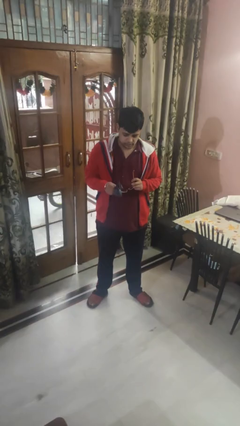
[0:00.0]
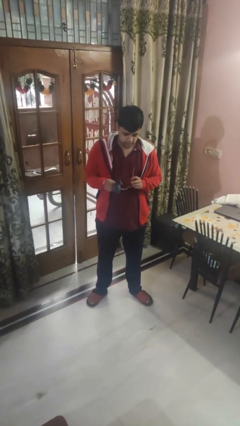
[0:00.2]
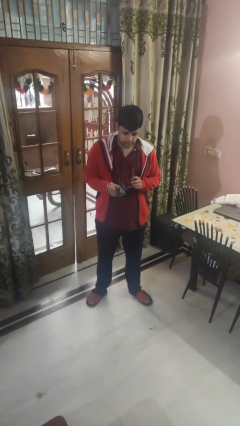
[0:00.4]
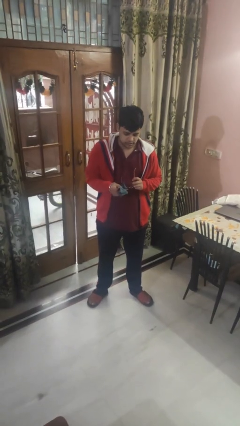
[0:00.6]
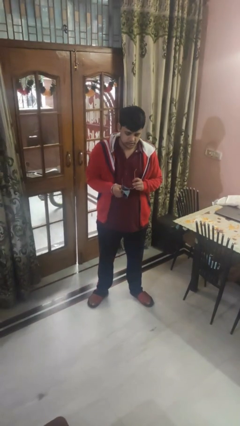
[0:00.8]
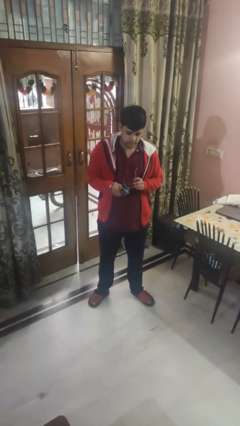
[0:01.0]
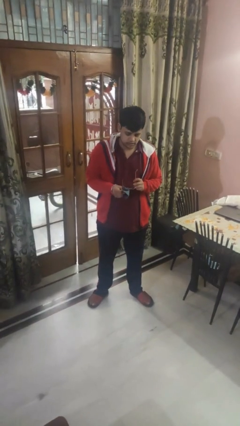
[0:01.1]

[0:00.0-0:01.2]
person cleans eyeglasses

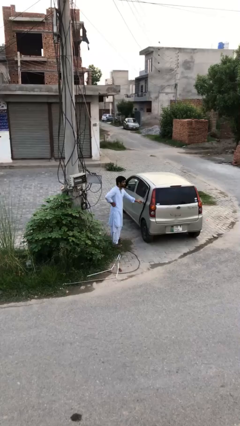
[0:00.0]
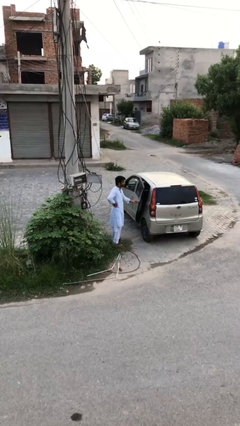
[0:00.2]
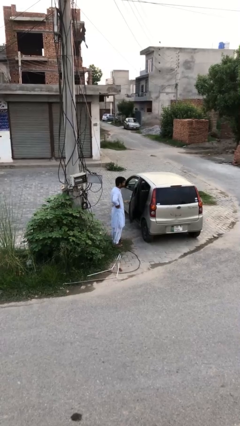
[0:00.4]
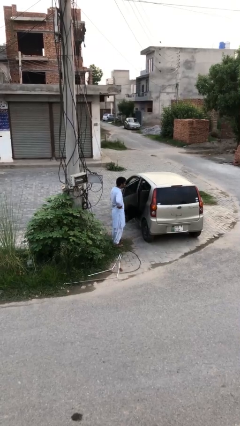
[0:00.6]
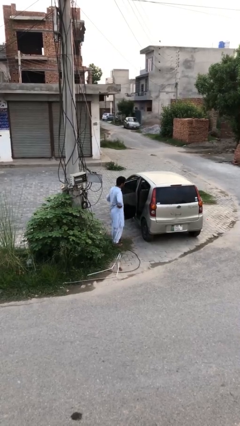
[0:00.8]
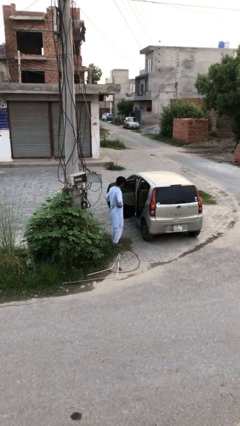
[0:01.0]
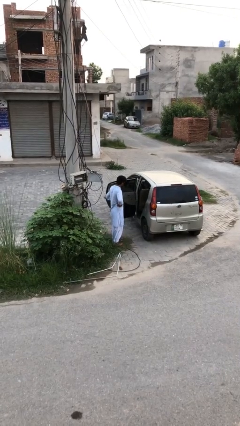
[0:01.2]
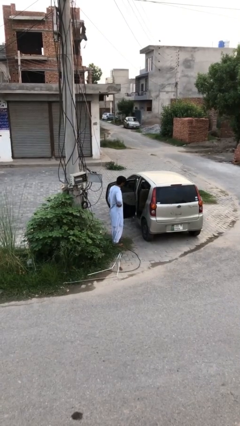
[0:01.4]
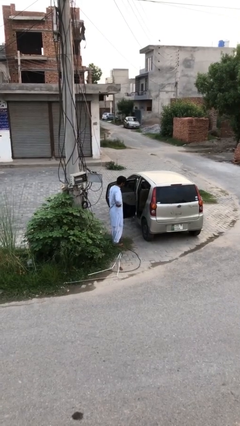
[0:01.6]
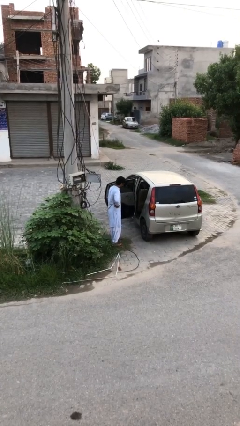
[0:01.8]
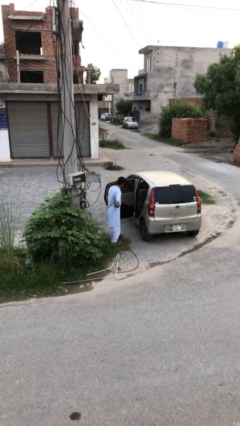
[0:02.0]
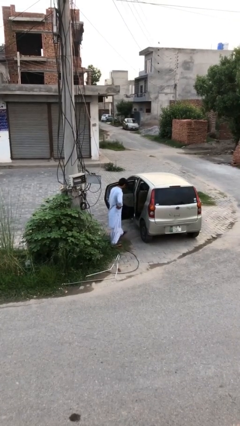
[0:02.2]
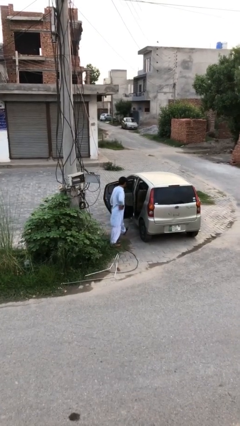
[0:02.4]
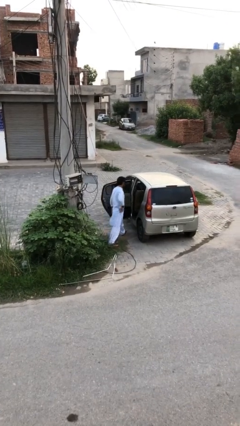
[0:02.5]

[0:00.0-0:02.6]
person opens car door

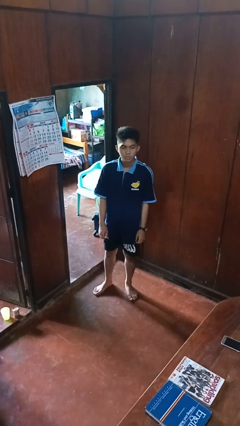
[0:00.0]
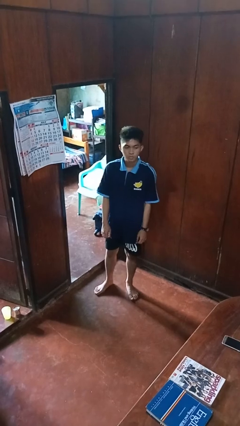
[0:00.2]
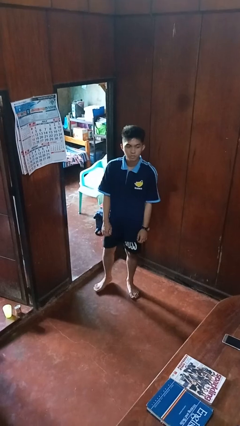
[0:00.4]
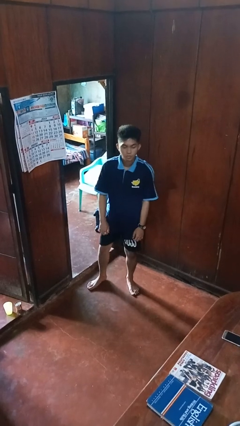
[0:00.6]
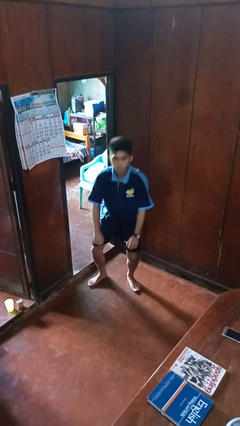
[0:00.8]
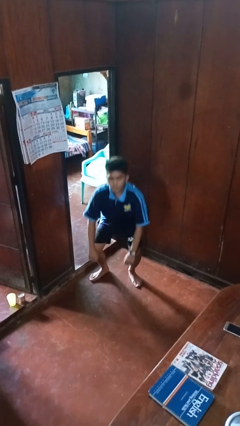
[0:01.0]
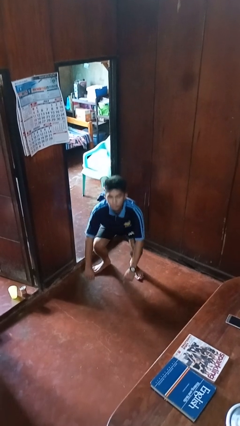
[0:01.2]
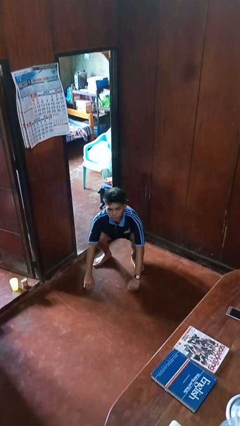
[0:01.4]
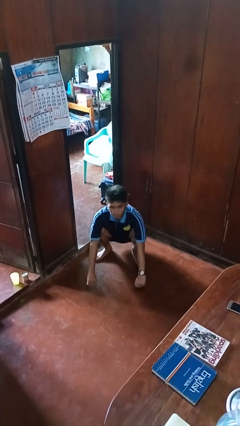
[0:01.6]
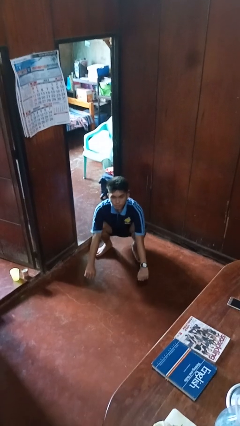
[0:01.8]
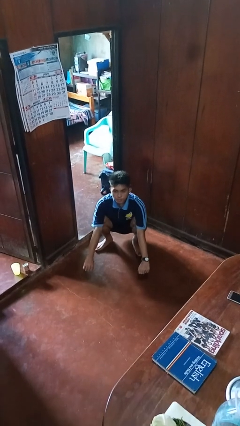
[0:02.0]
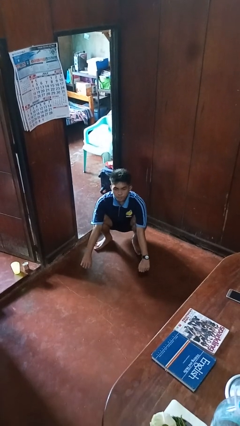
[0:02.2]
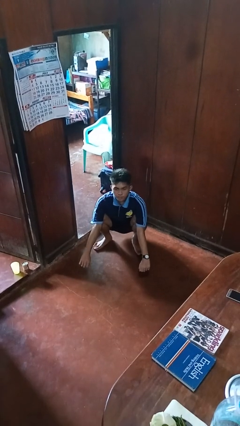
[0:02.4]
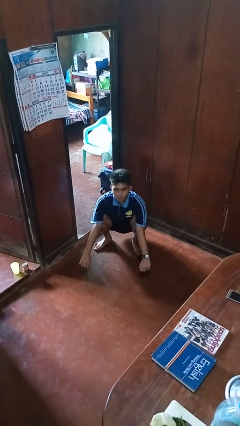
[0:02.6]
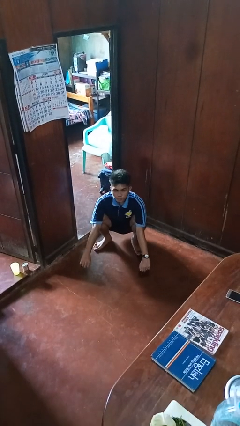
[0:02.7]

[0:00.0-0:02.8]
person squats

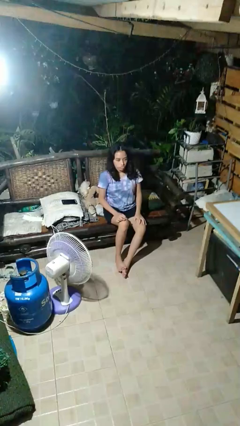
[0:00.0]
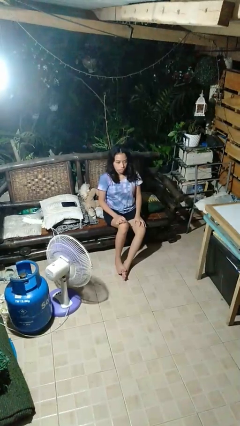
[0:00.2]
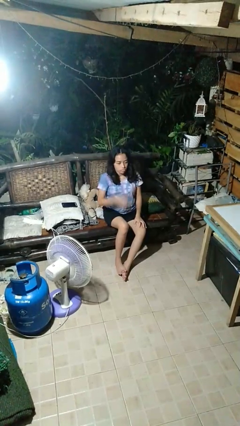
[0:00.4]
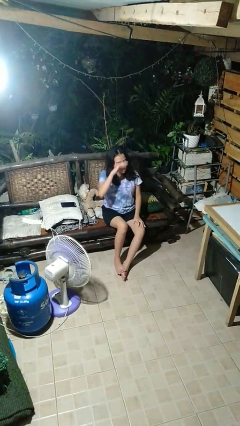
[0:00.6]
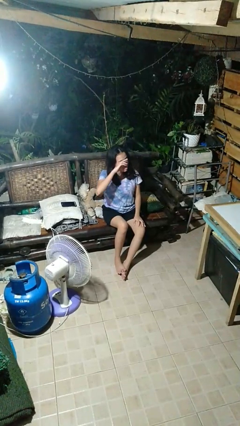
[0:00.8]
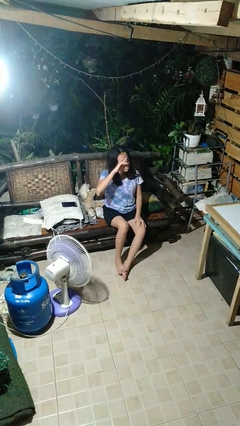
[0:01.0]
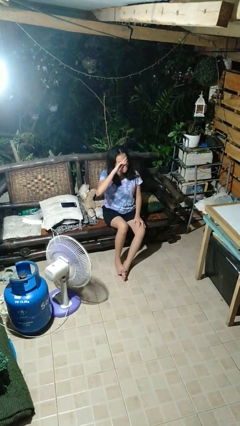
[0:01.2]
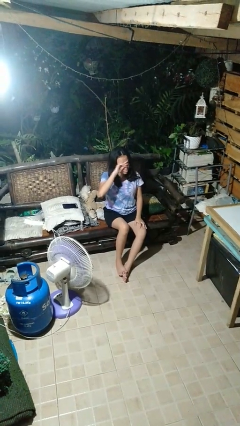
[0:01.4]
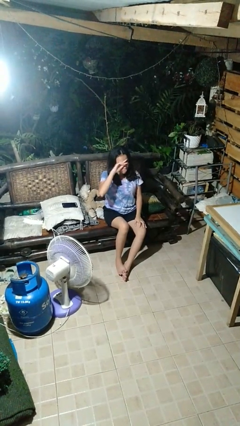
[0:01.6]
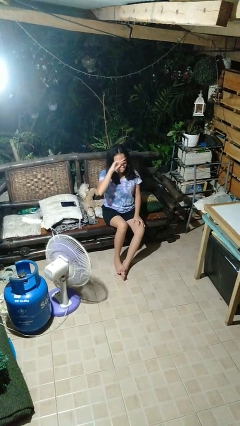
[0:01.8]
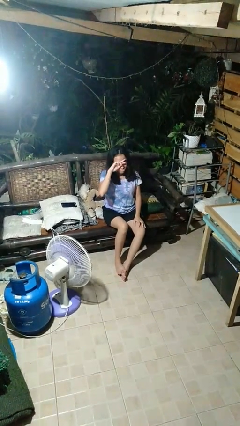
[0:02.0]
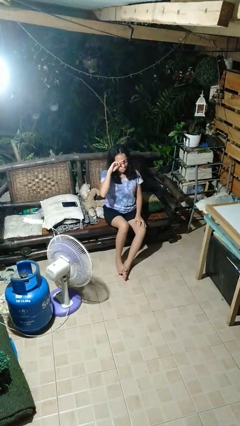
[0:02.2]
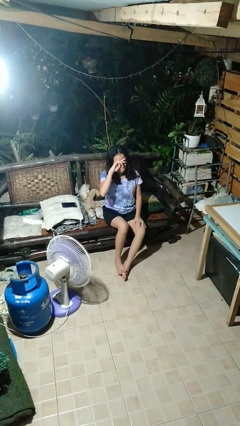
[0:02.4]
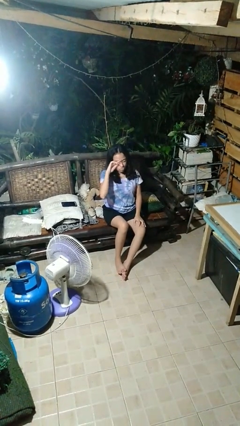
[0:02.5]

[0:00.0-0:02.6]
person rubs eyes

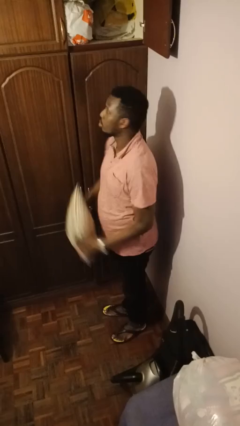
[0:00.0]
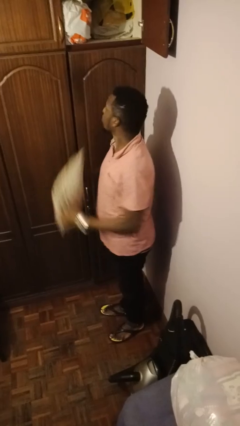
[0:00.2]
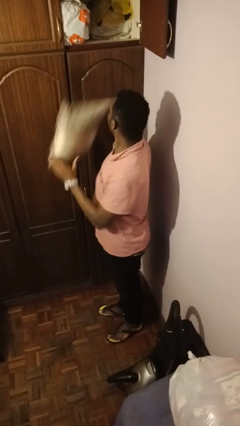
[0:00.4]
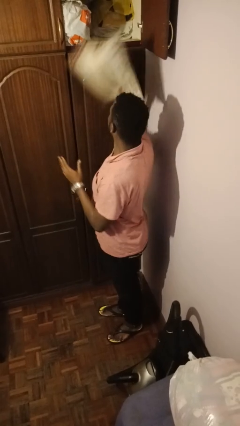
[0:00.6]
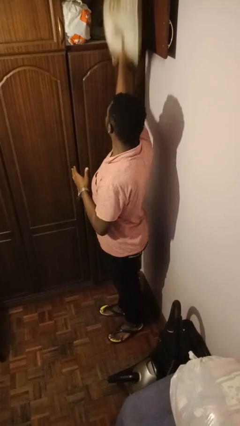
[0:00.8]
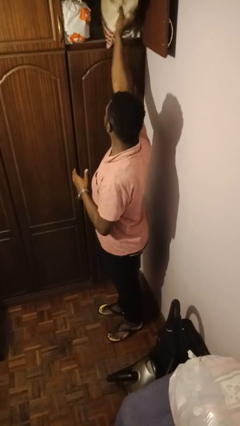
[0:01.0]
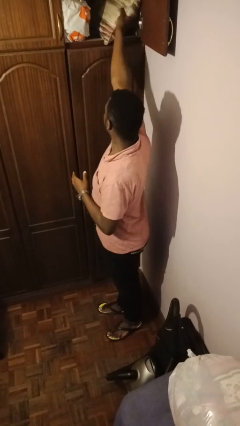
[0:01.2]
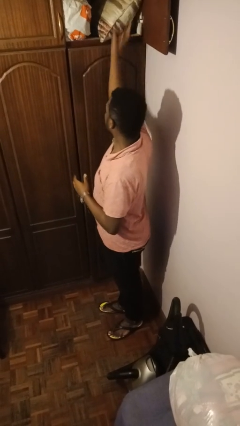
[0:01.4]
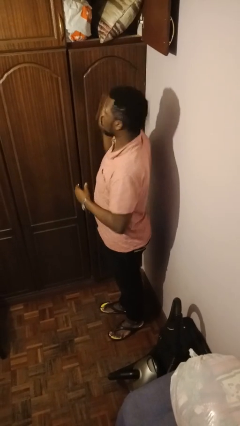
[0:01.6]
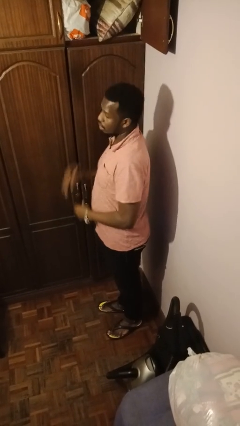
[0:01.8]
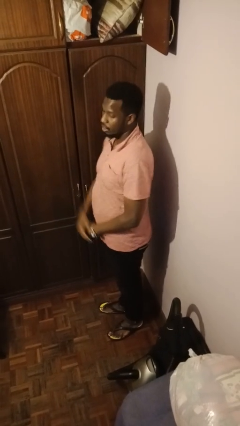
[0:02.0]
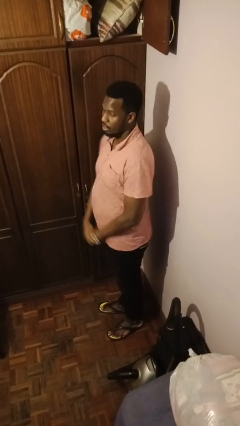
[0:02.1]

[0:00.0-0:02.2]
person puts down object on shelf

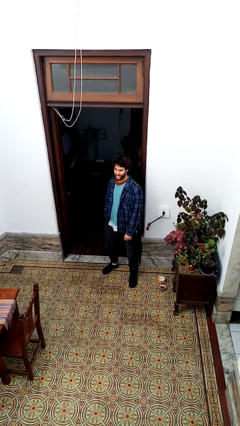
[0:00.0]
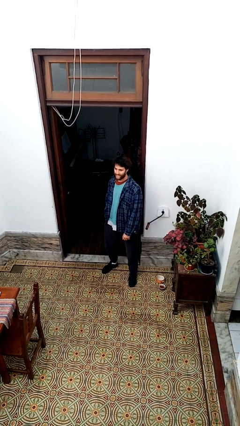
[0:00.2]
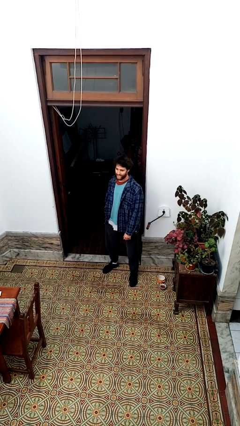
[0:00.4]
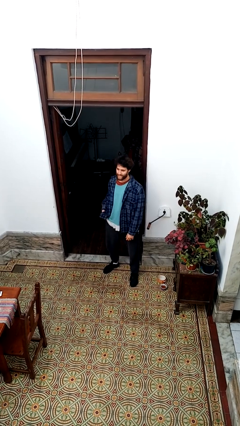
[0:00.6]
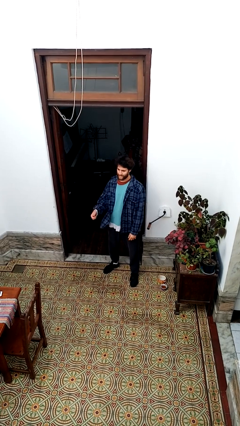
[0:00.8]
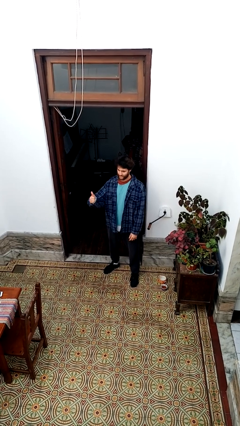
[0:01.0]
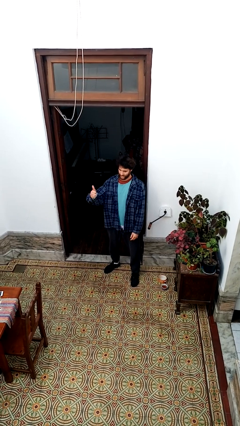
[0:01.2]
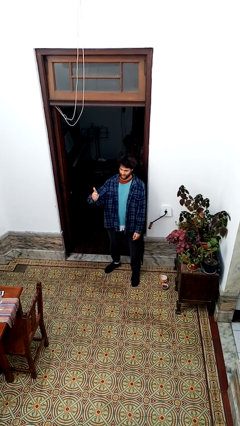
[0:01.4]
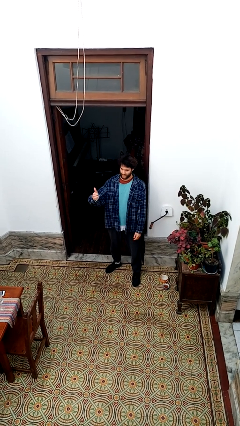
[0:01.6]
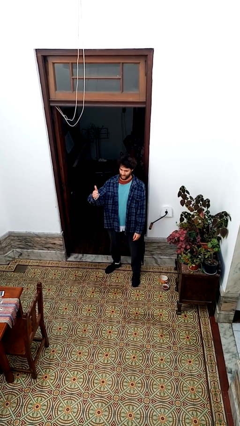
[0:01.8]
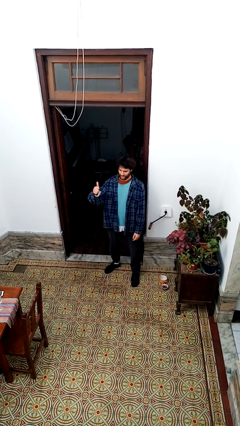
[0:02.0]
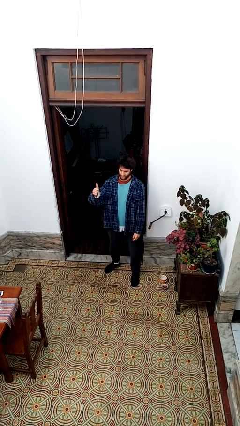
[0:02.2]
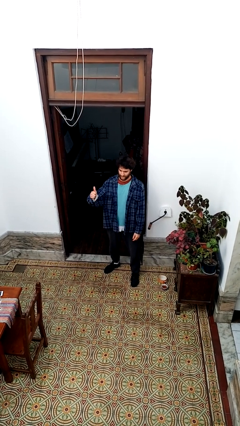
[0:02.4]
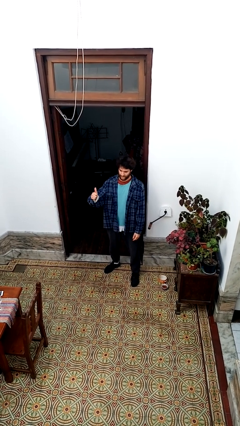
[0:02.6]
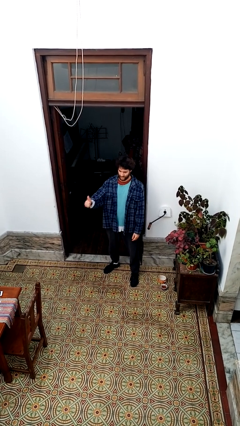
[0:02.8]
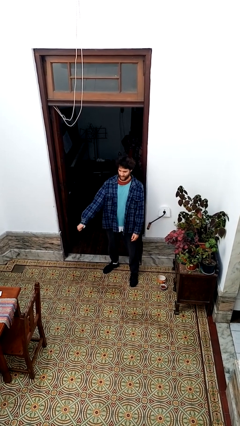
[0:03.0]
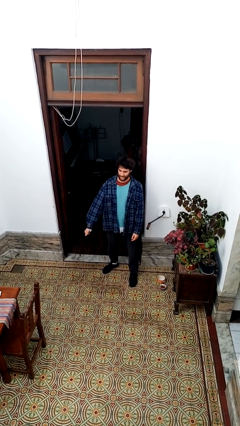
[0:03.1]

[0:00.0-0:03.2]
person gestures thumbs up

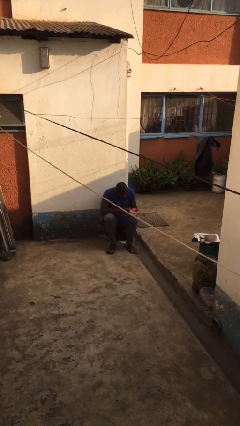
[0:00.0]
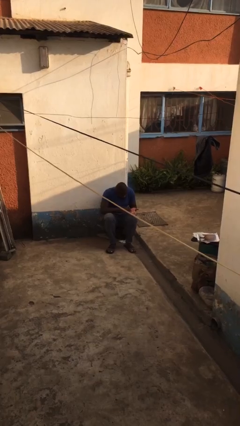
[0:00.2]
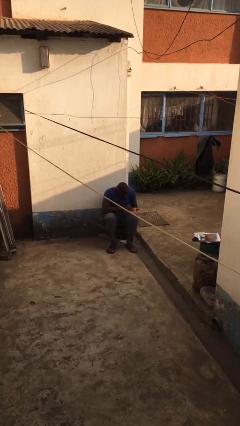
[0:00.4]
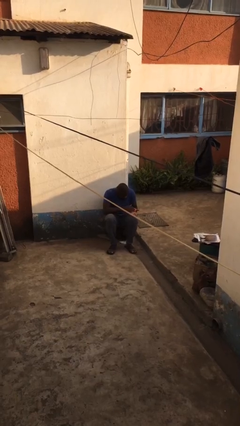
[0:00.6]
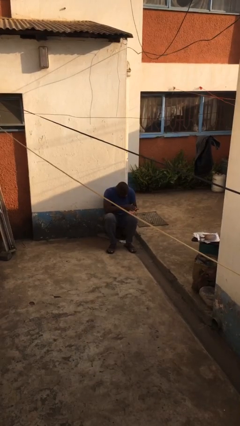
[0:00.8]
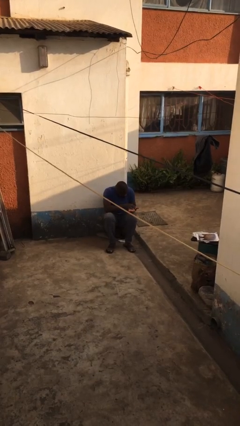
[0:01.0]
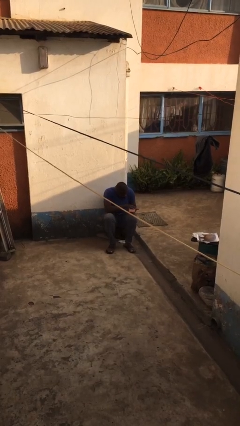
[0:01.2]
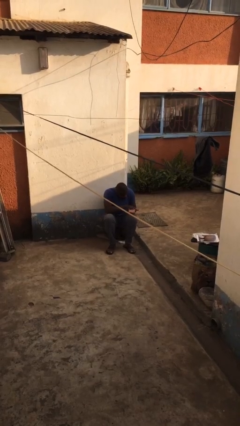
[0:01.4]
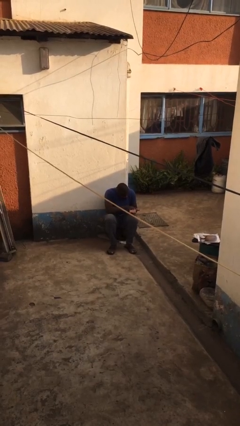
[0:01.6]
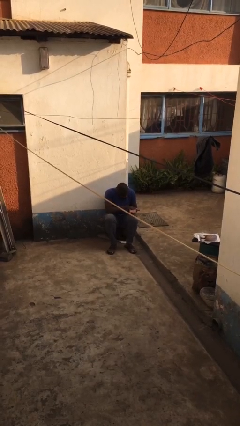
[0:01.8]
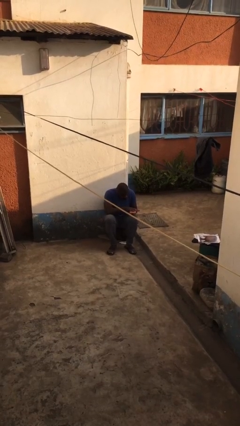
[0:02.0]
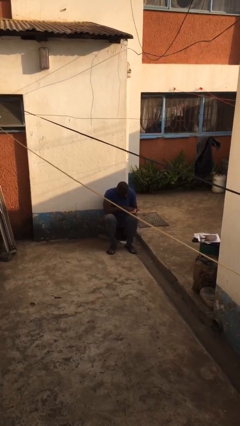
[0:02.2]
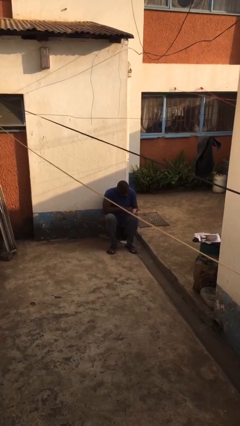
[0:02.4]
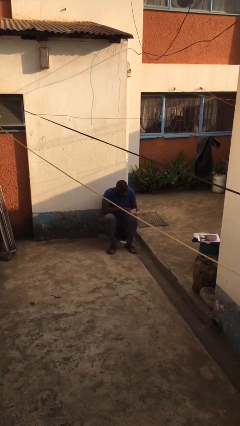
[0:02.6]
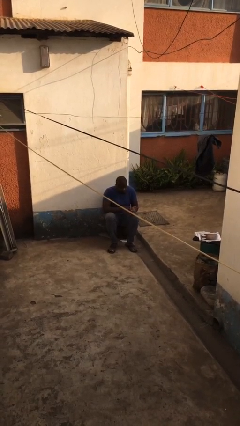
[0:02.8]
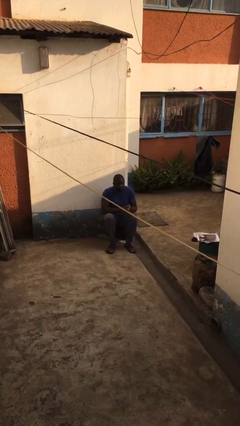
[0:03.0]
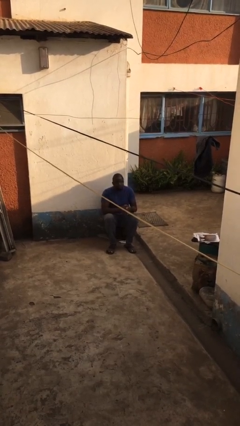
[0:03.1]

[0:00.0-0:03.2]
person looks at hands in lap
